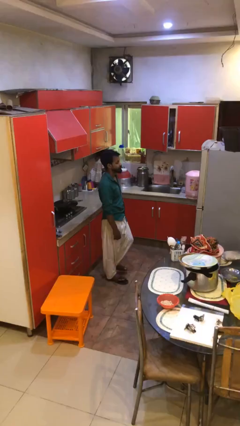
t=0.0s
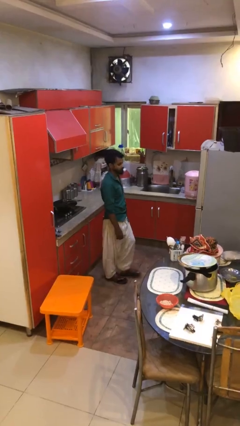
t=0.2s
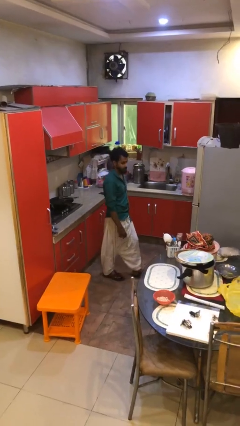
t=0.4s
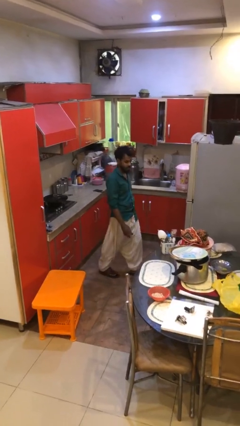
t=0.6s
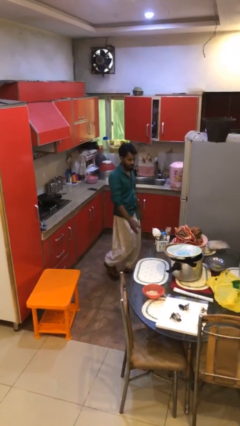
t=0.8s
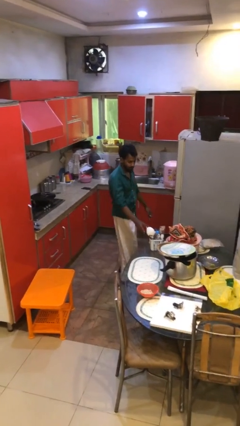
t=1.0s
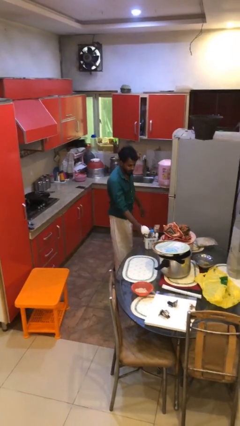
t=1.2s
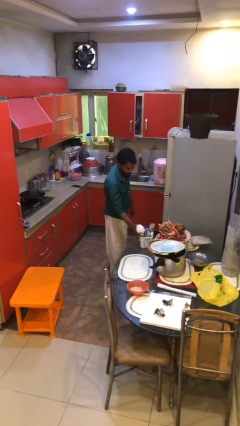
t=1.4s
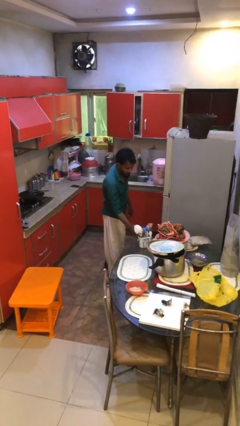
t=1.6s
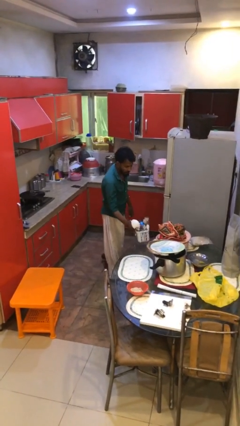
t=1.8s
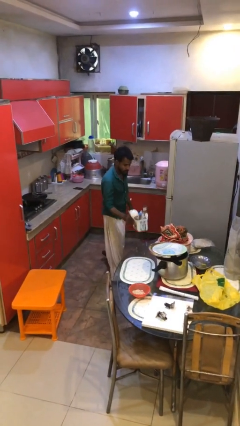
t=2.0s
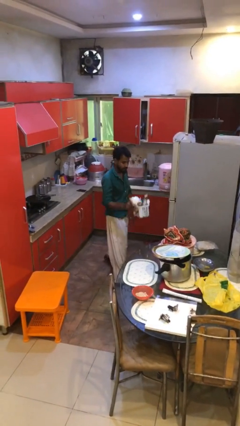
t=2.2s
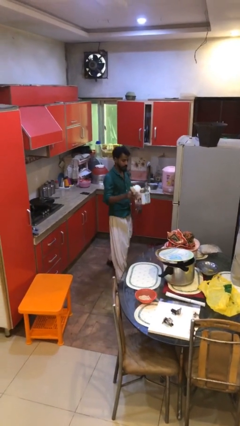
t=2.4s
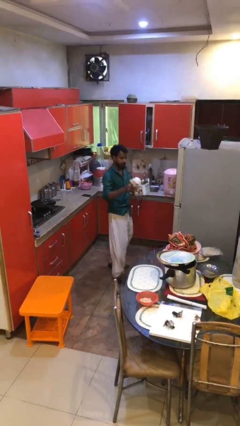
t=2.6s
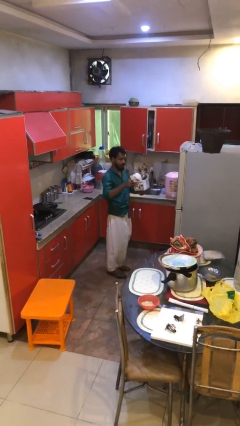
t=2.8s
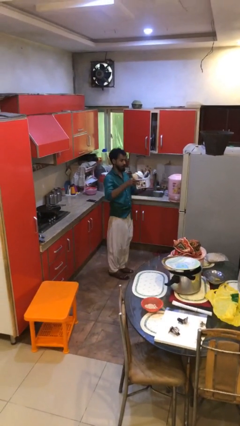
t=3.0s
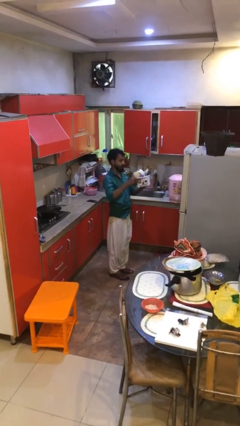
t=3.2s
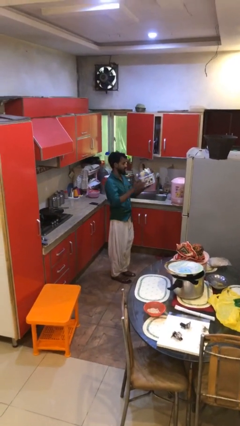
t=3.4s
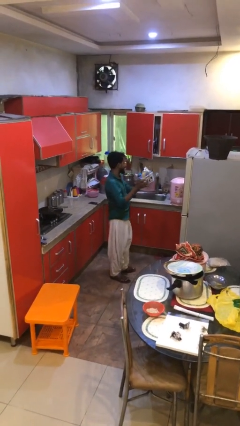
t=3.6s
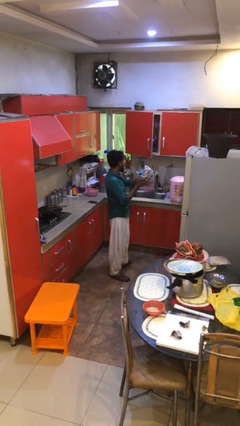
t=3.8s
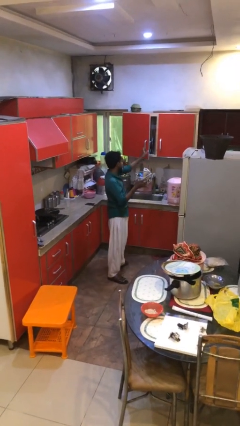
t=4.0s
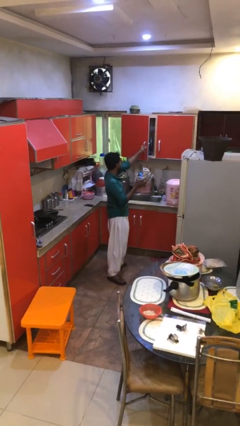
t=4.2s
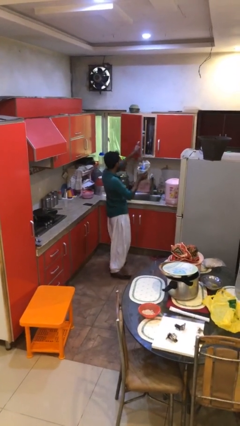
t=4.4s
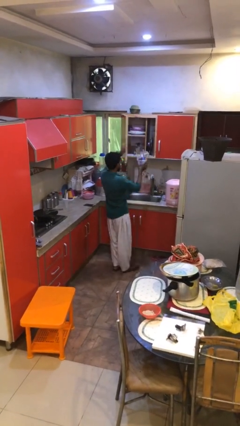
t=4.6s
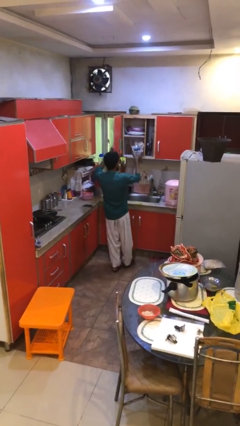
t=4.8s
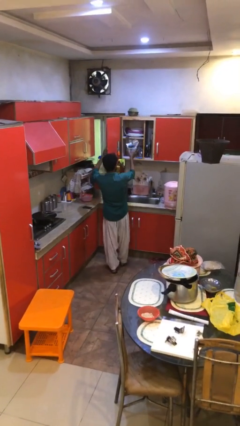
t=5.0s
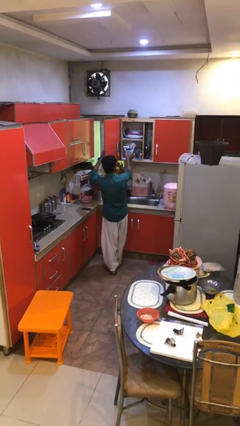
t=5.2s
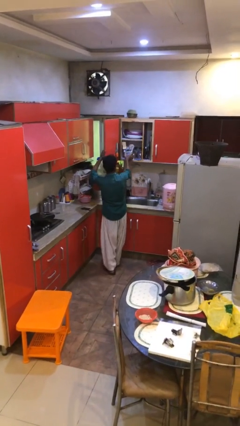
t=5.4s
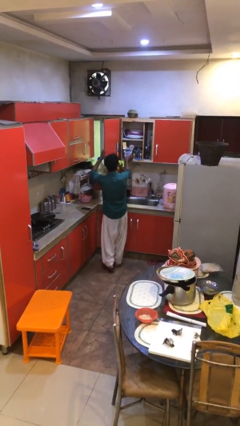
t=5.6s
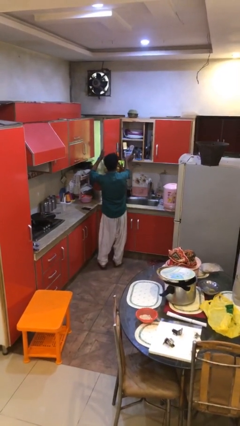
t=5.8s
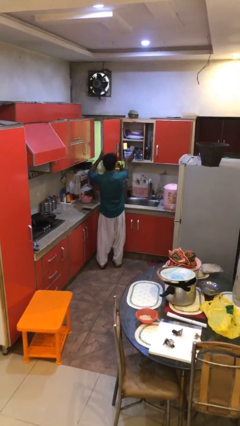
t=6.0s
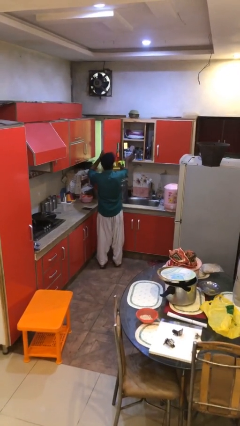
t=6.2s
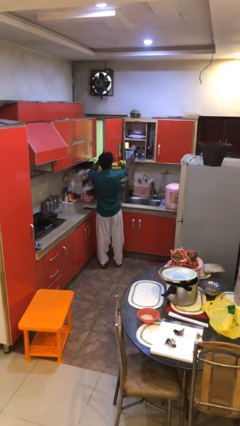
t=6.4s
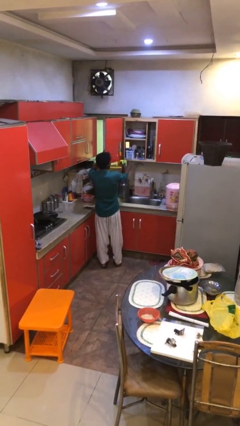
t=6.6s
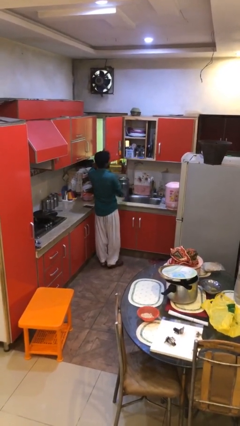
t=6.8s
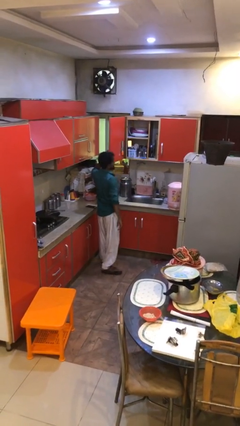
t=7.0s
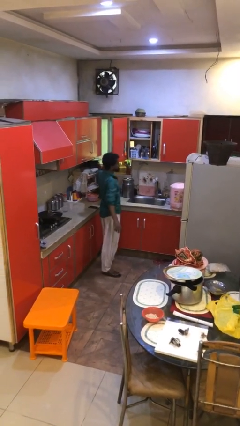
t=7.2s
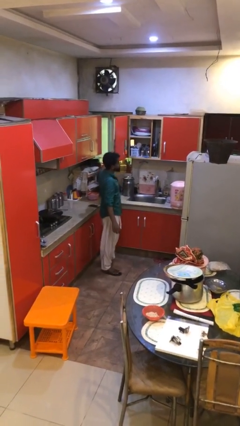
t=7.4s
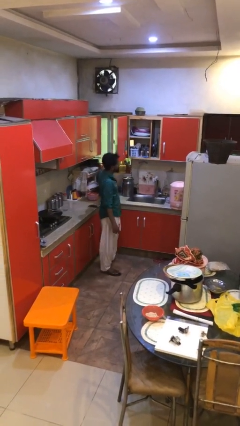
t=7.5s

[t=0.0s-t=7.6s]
person picks up object from table

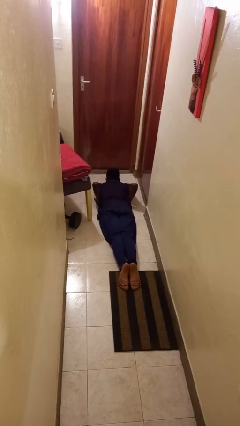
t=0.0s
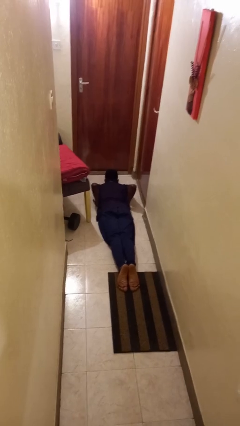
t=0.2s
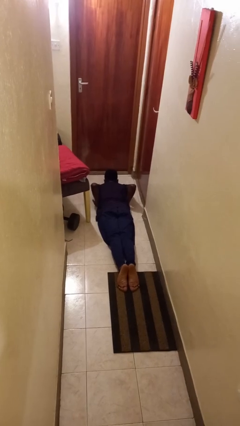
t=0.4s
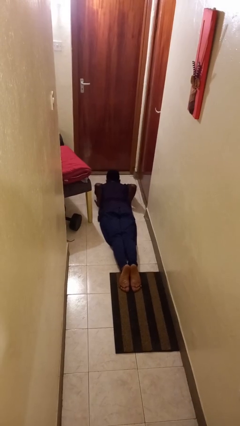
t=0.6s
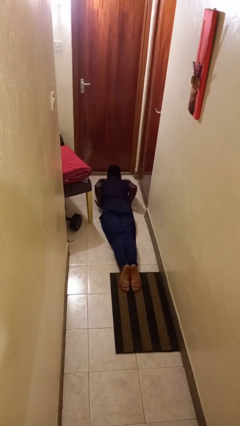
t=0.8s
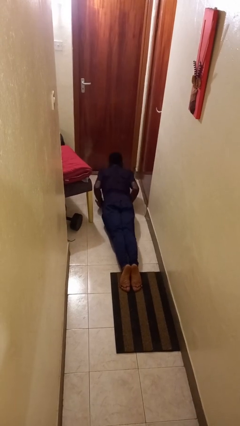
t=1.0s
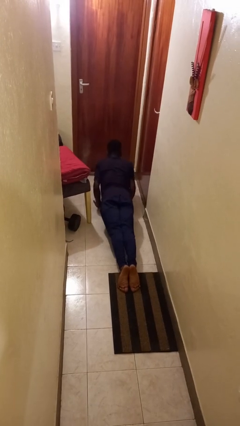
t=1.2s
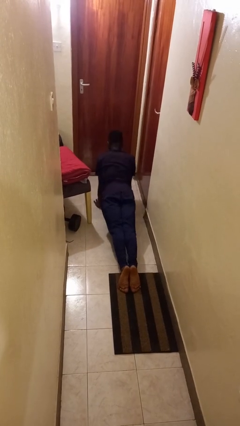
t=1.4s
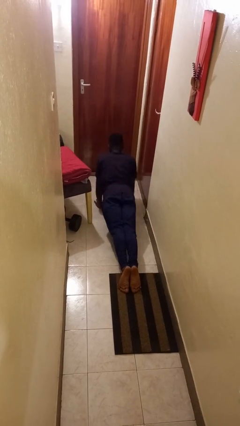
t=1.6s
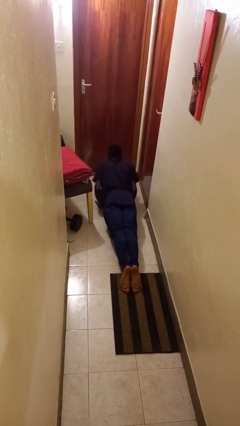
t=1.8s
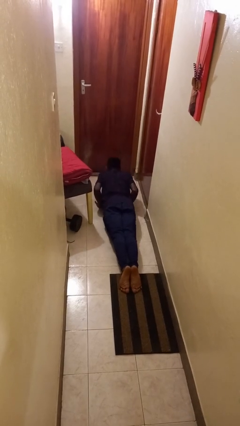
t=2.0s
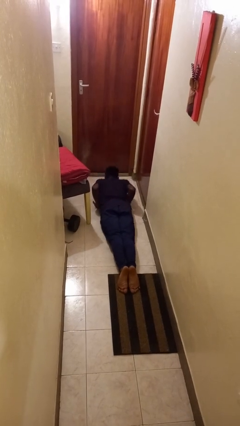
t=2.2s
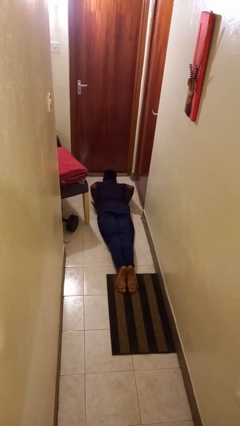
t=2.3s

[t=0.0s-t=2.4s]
person exercises with pushup

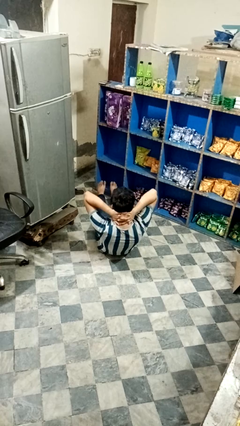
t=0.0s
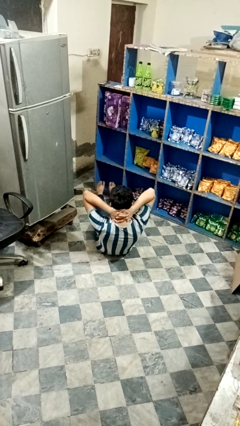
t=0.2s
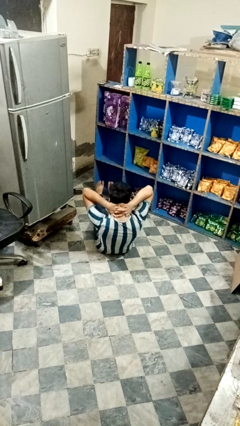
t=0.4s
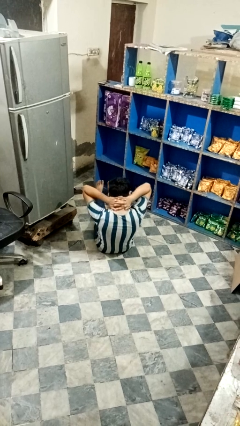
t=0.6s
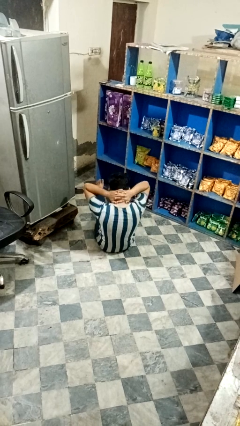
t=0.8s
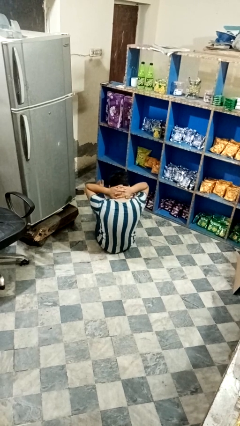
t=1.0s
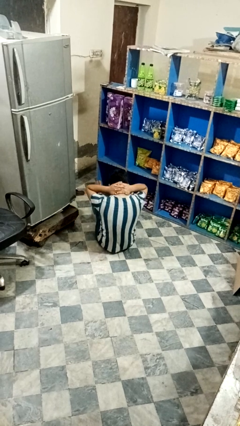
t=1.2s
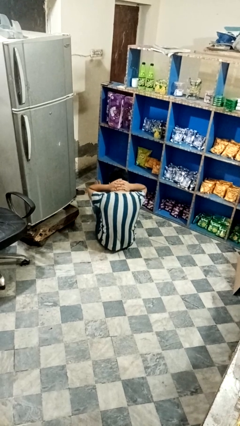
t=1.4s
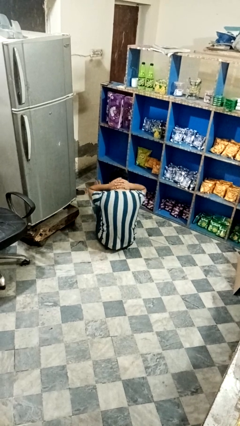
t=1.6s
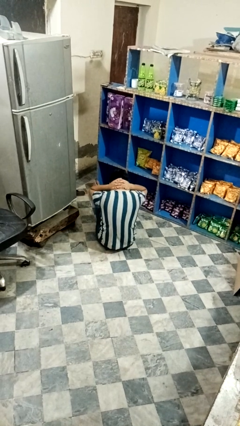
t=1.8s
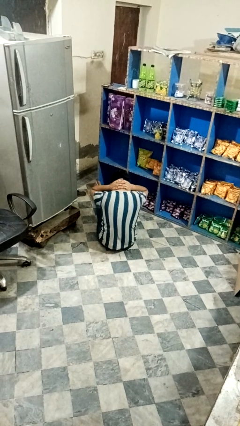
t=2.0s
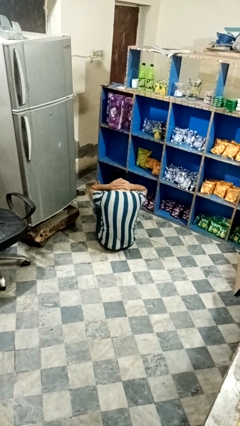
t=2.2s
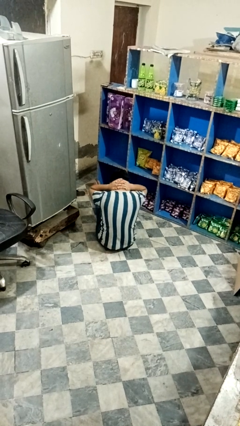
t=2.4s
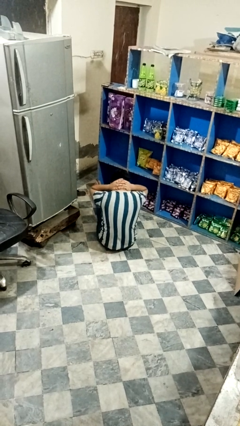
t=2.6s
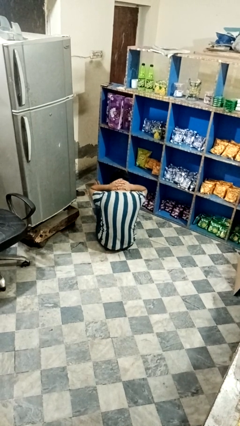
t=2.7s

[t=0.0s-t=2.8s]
person exercises with situp

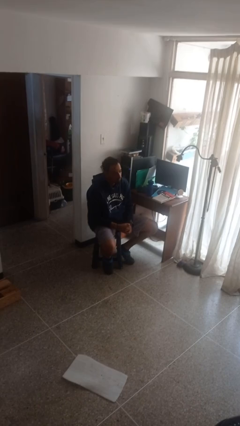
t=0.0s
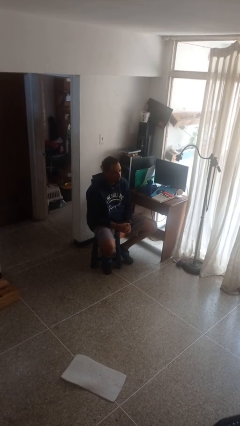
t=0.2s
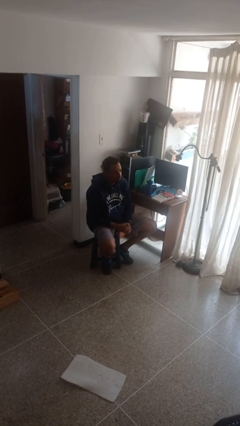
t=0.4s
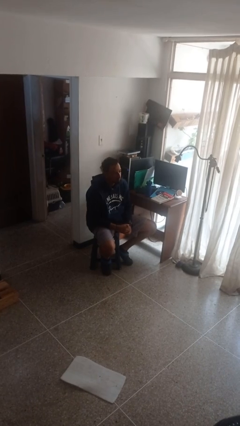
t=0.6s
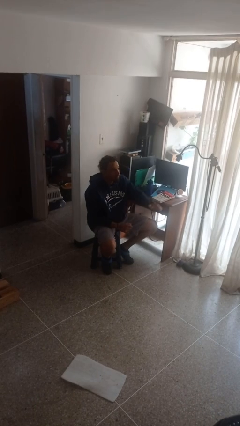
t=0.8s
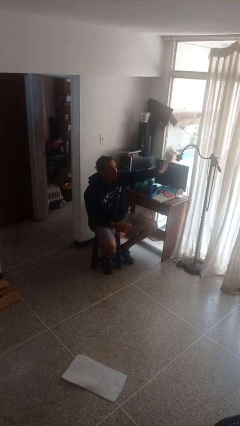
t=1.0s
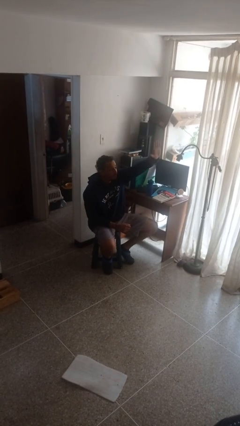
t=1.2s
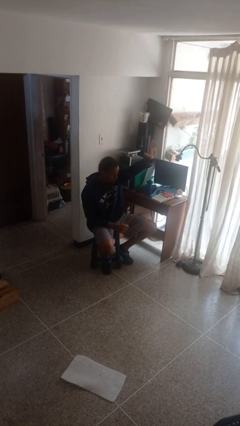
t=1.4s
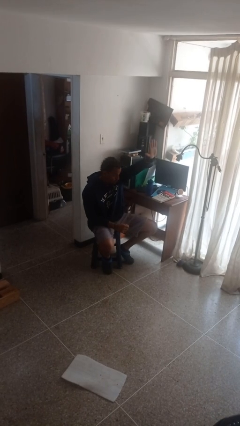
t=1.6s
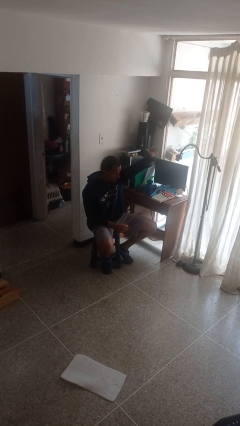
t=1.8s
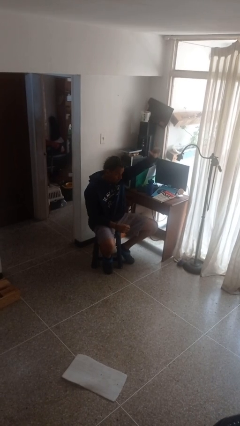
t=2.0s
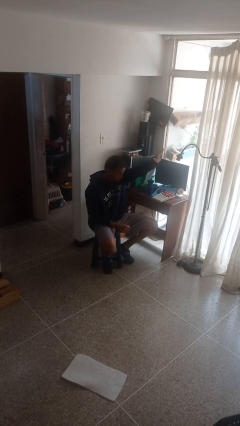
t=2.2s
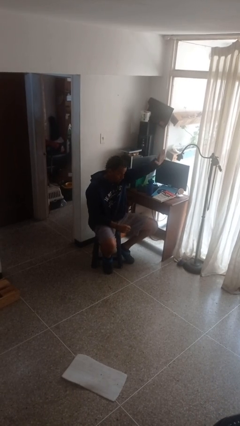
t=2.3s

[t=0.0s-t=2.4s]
person gestures raise hand

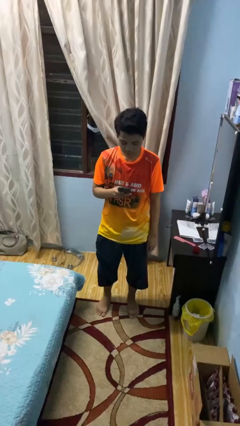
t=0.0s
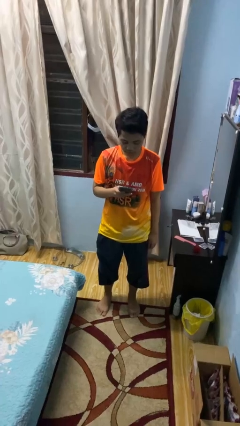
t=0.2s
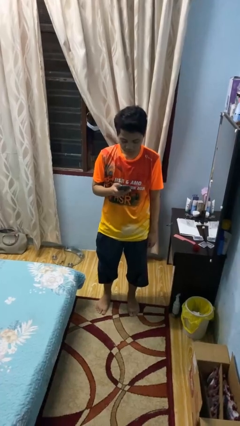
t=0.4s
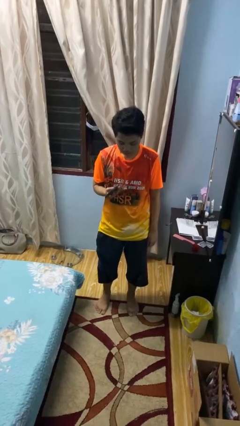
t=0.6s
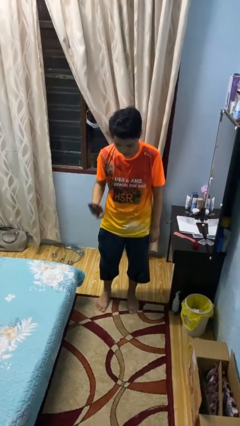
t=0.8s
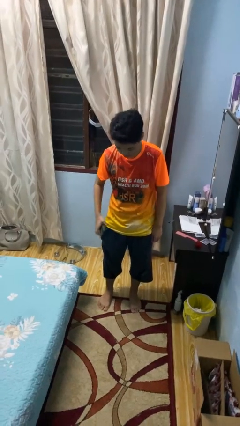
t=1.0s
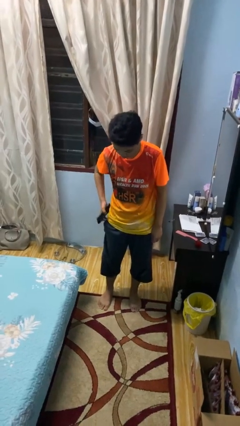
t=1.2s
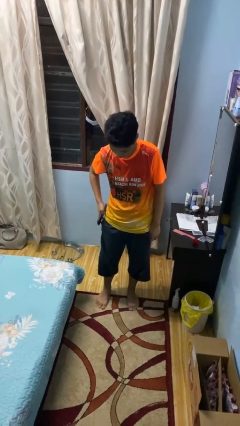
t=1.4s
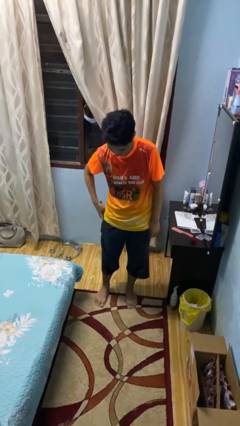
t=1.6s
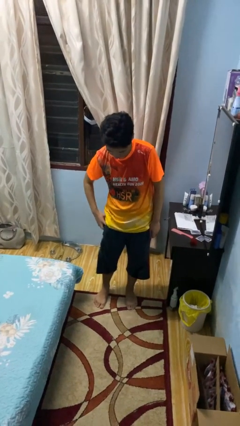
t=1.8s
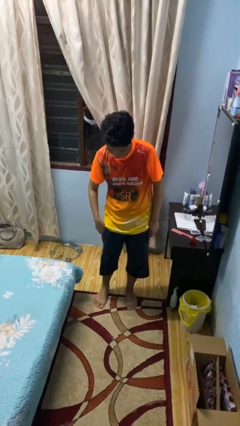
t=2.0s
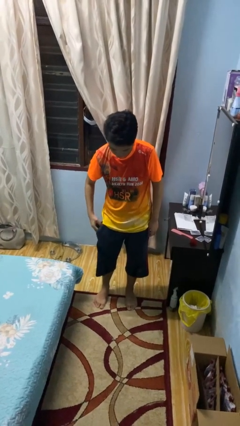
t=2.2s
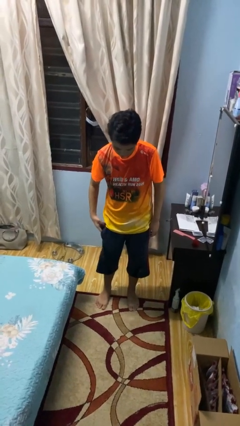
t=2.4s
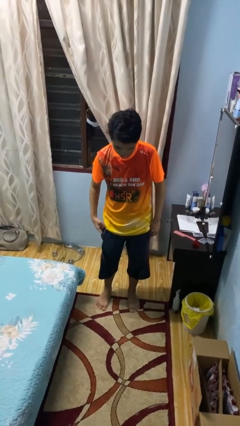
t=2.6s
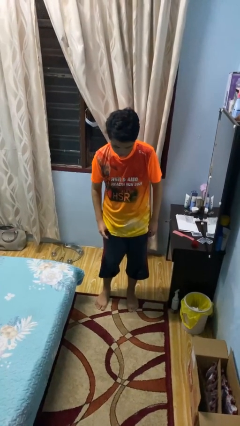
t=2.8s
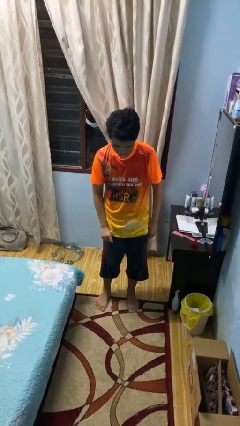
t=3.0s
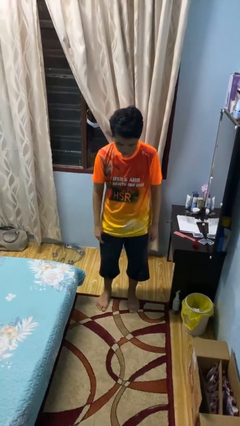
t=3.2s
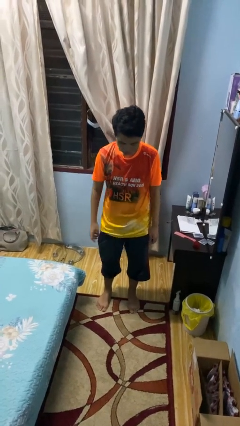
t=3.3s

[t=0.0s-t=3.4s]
person puts phone into pocket
